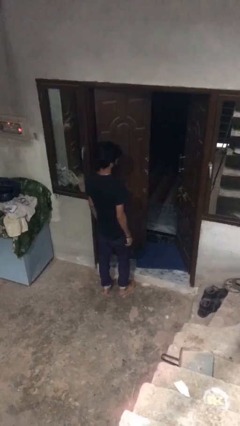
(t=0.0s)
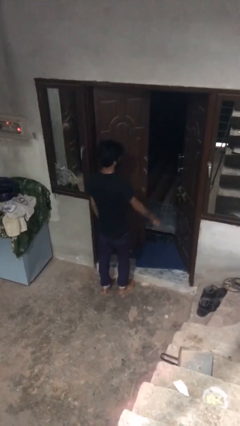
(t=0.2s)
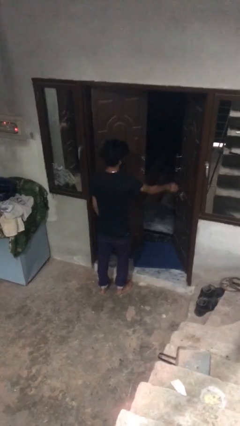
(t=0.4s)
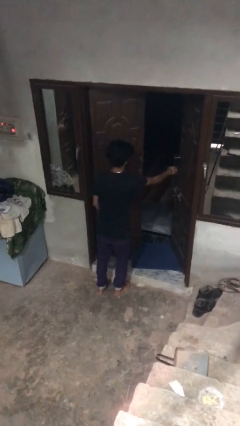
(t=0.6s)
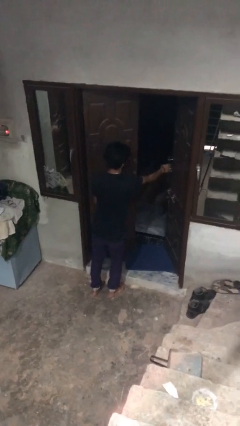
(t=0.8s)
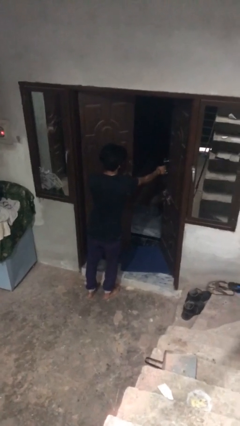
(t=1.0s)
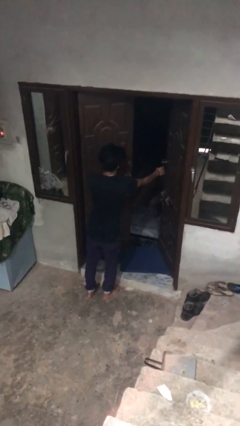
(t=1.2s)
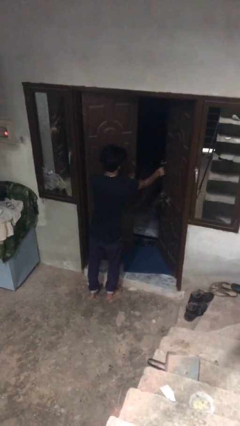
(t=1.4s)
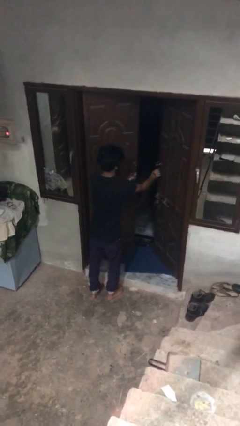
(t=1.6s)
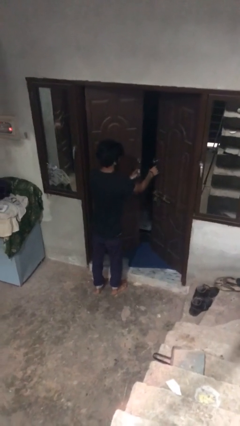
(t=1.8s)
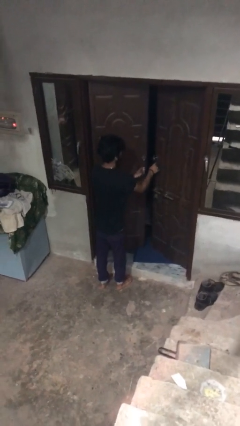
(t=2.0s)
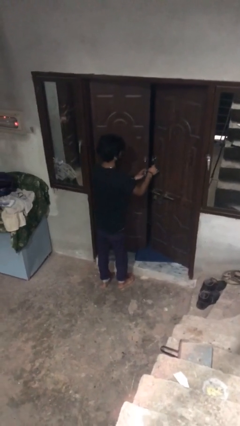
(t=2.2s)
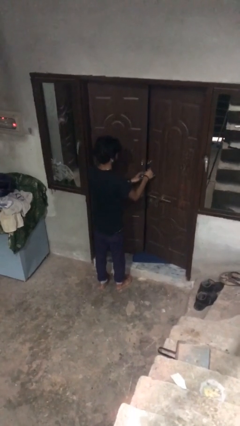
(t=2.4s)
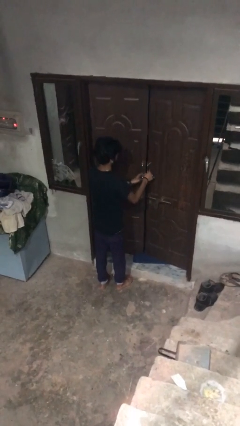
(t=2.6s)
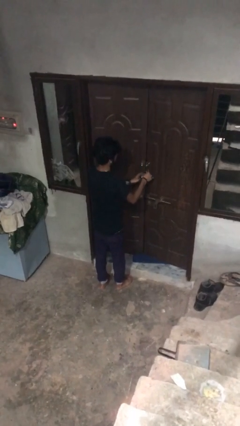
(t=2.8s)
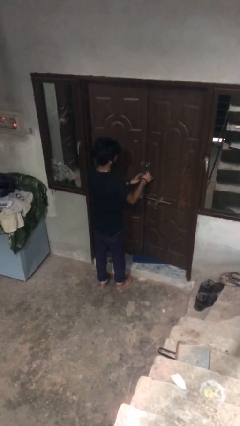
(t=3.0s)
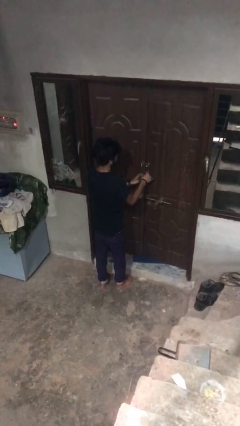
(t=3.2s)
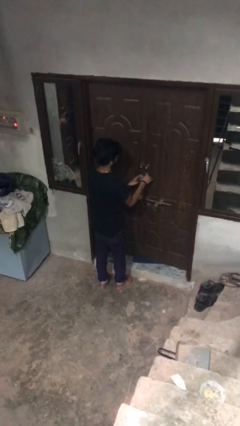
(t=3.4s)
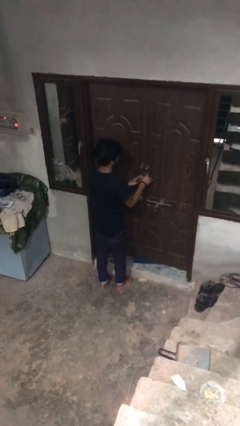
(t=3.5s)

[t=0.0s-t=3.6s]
person closes facility door

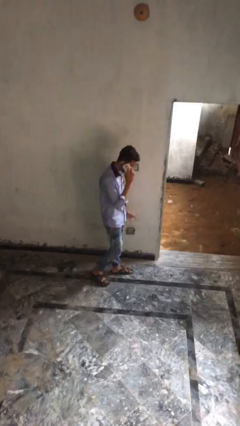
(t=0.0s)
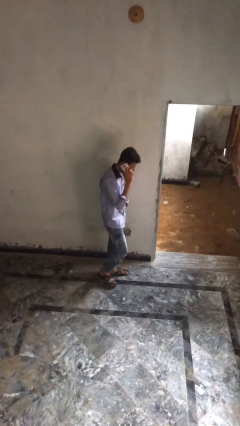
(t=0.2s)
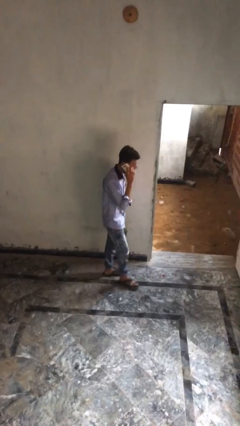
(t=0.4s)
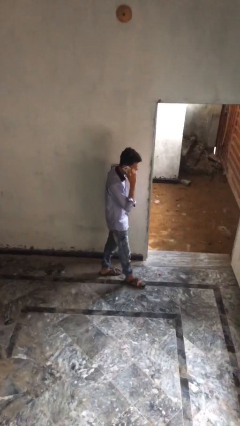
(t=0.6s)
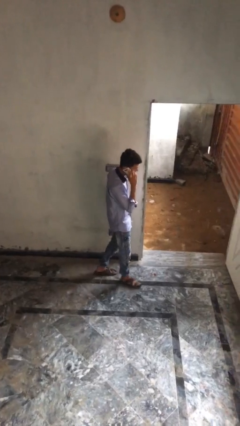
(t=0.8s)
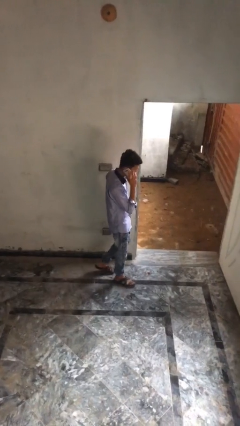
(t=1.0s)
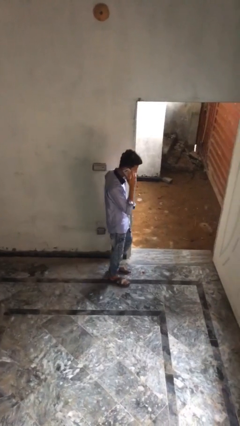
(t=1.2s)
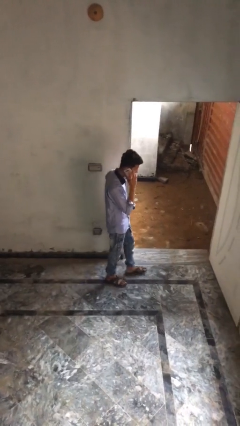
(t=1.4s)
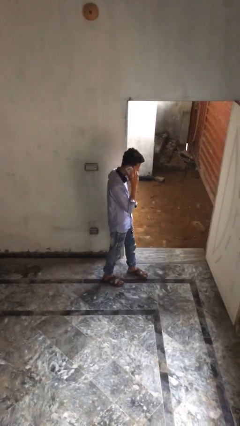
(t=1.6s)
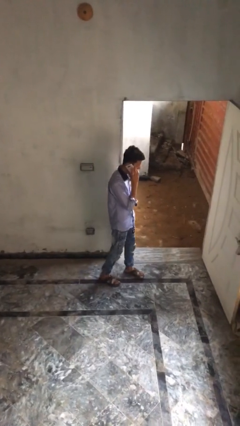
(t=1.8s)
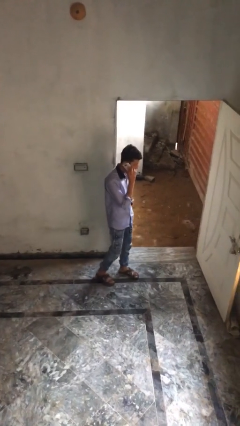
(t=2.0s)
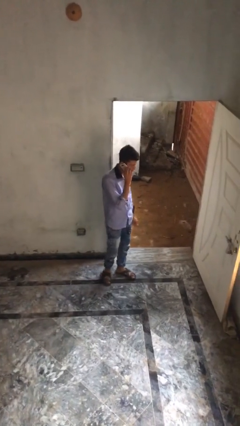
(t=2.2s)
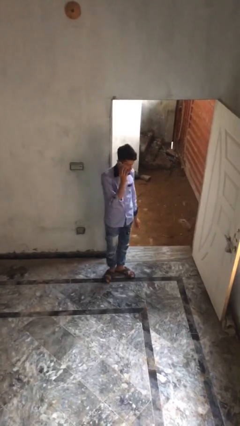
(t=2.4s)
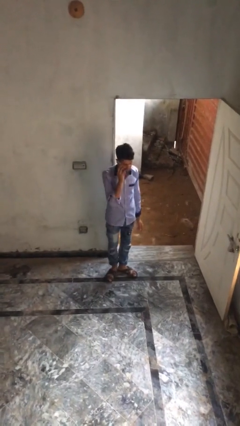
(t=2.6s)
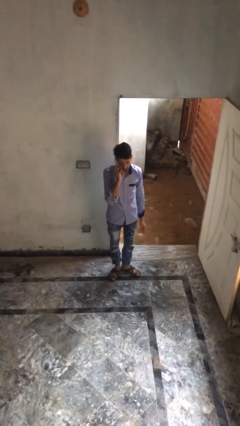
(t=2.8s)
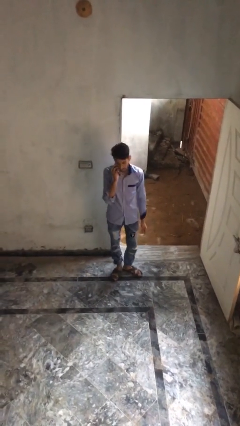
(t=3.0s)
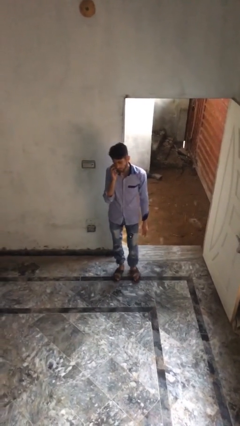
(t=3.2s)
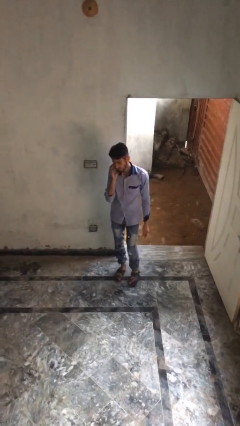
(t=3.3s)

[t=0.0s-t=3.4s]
person talks on phone

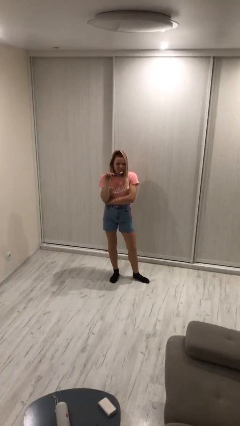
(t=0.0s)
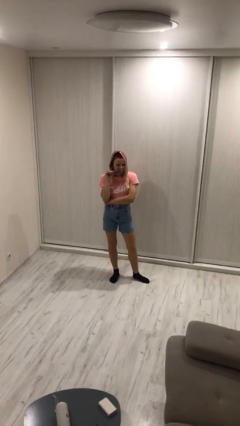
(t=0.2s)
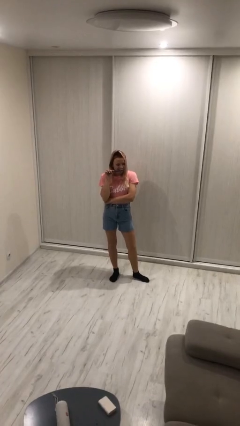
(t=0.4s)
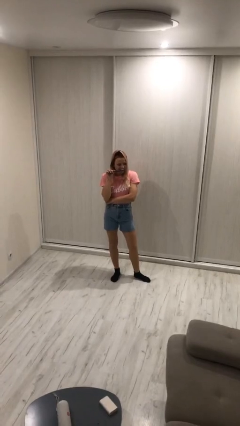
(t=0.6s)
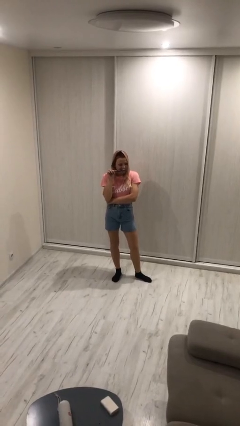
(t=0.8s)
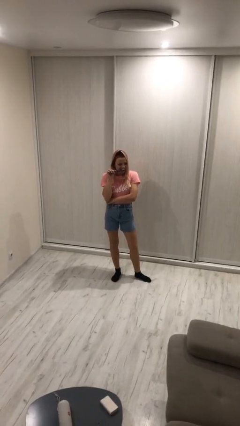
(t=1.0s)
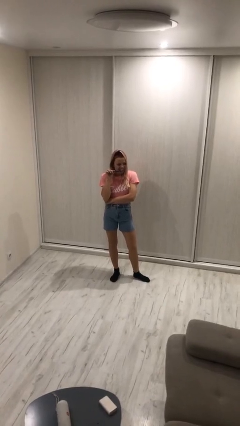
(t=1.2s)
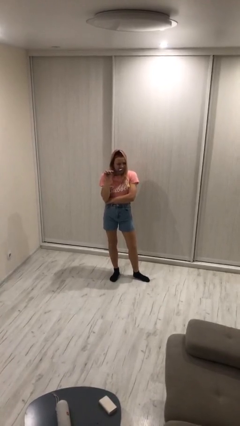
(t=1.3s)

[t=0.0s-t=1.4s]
person brushes teeth

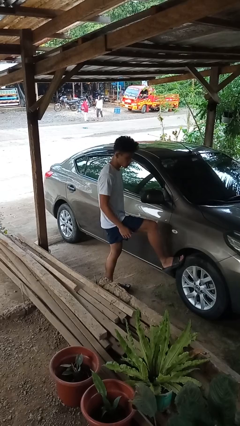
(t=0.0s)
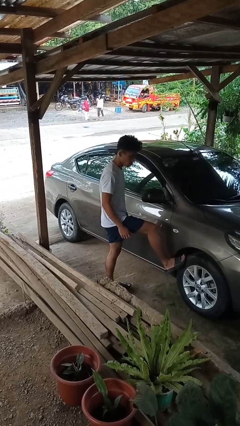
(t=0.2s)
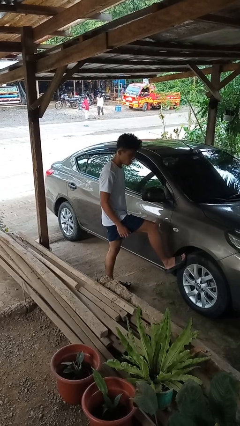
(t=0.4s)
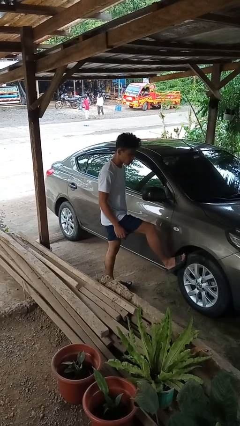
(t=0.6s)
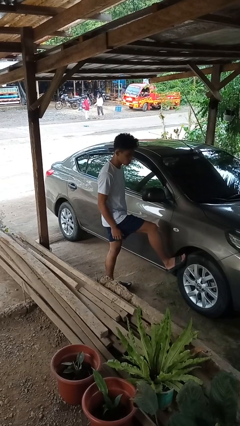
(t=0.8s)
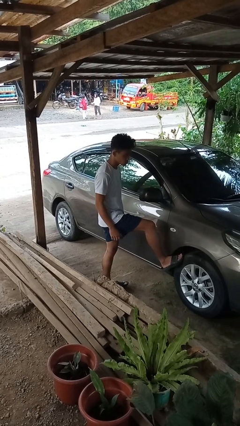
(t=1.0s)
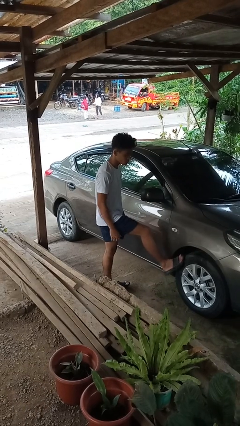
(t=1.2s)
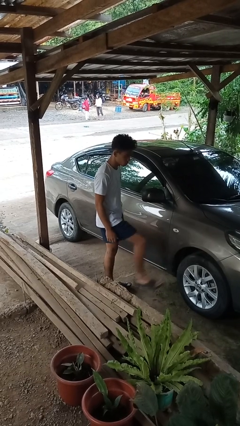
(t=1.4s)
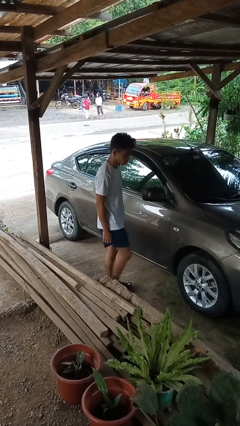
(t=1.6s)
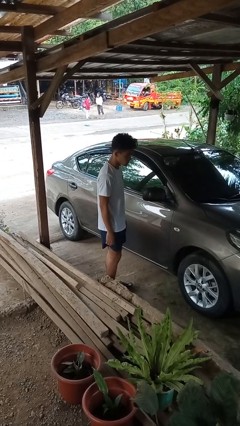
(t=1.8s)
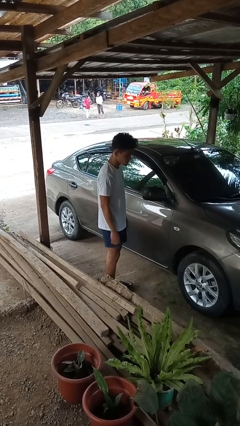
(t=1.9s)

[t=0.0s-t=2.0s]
person kicks car tires

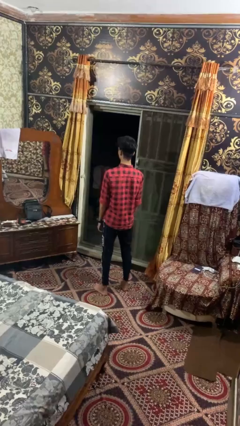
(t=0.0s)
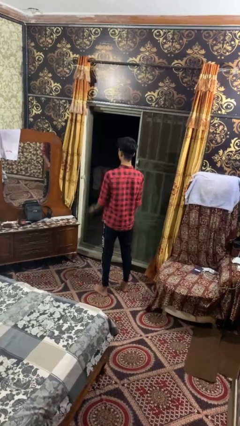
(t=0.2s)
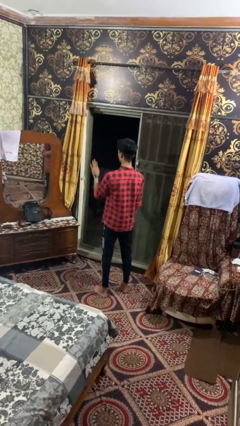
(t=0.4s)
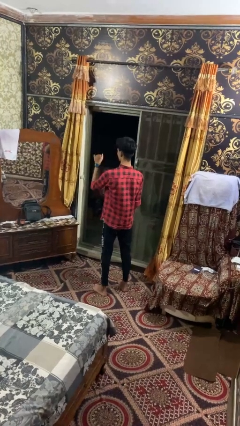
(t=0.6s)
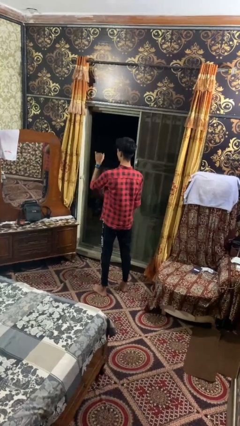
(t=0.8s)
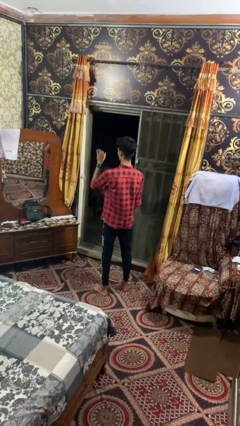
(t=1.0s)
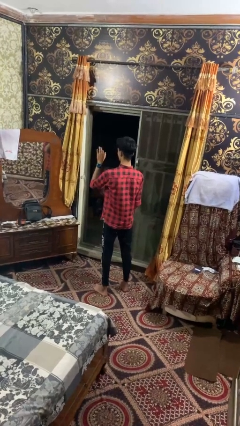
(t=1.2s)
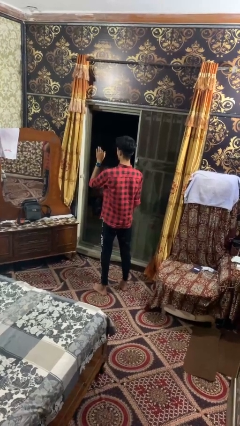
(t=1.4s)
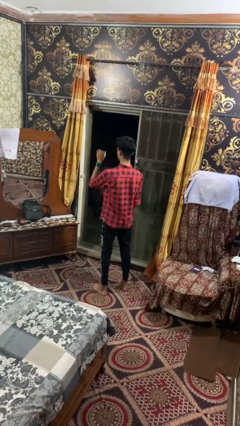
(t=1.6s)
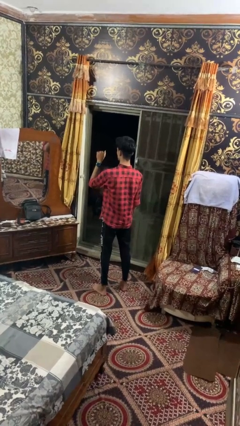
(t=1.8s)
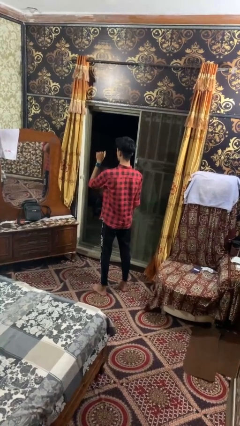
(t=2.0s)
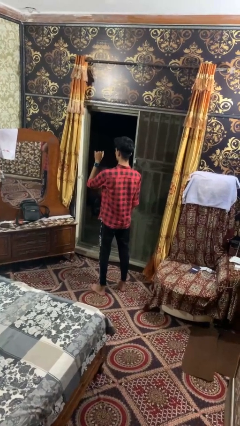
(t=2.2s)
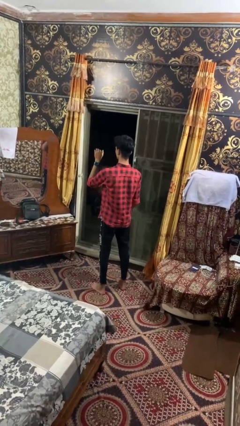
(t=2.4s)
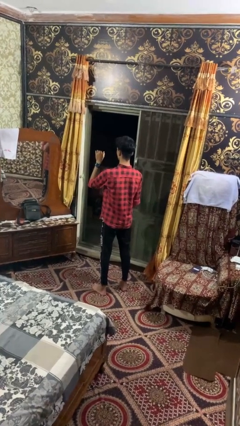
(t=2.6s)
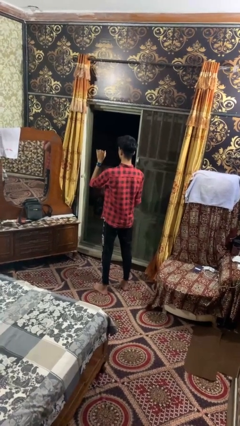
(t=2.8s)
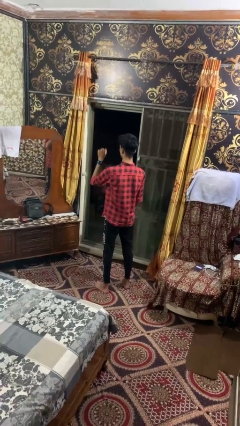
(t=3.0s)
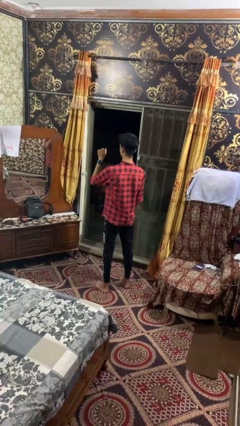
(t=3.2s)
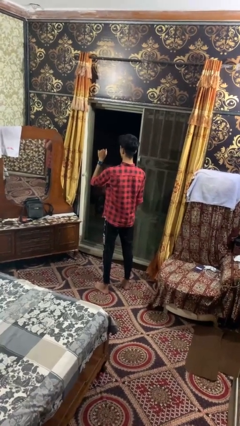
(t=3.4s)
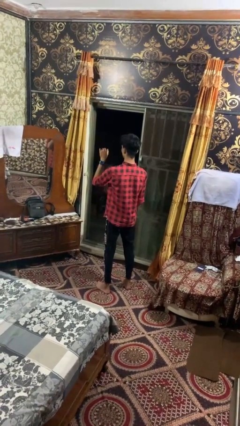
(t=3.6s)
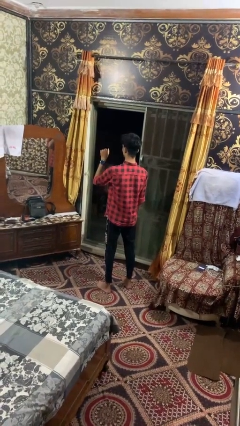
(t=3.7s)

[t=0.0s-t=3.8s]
person gestures come here

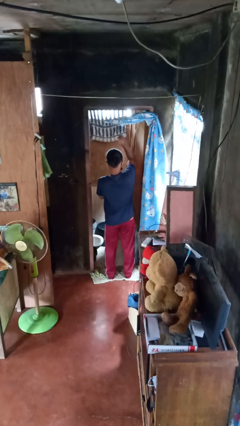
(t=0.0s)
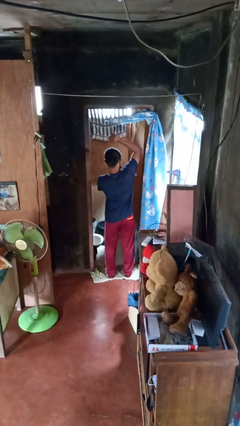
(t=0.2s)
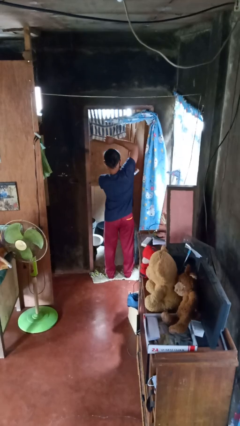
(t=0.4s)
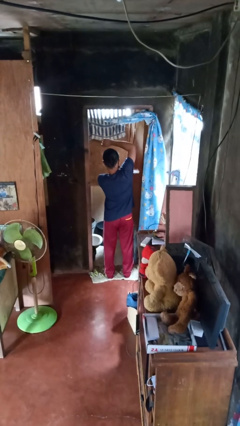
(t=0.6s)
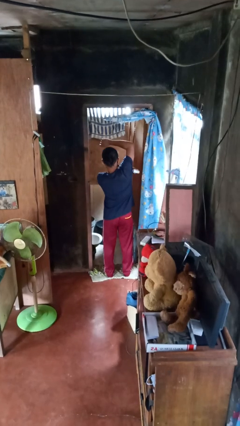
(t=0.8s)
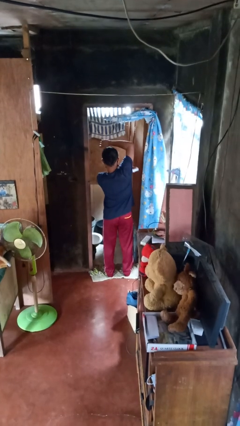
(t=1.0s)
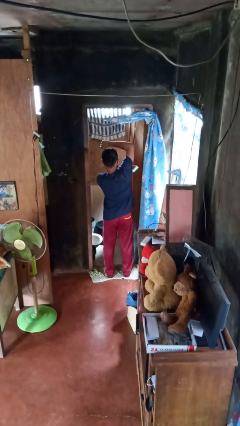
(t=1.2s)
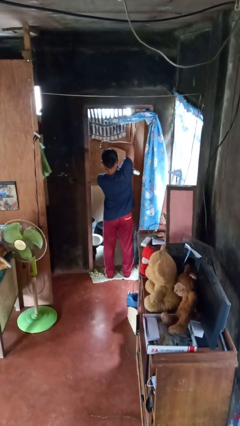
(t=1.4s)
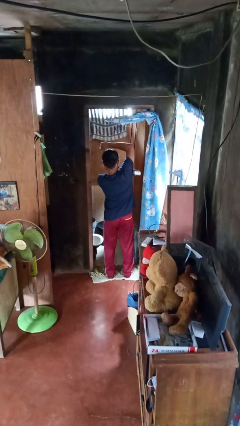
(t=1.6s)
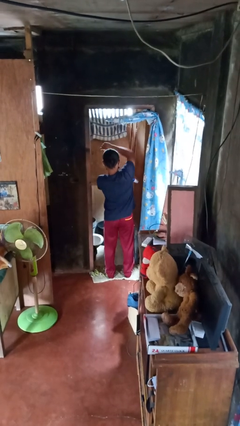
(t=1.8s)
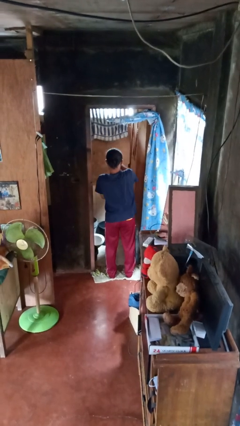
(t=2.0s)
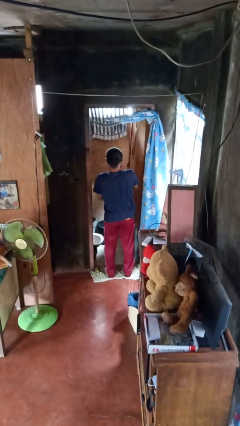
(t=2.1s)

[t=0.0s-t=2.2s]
person applies deodorant

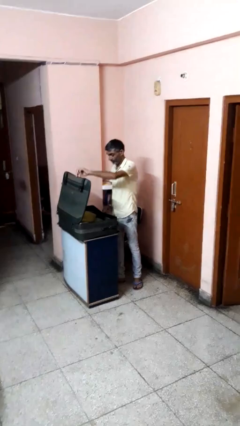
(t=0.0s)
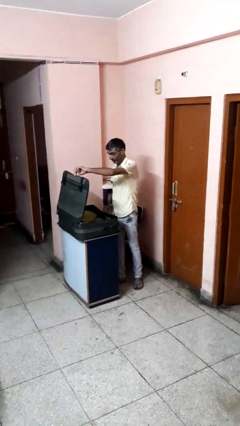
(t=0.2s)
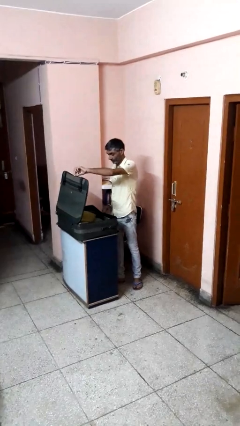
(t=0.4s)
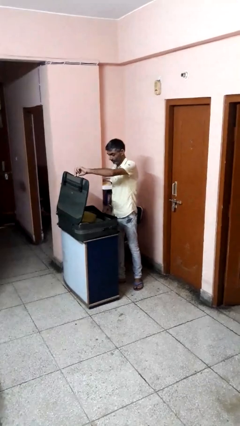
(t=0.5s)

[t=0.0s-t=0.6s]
person opens suitcase

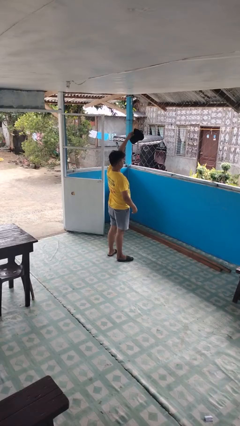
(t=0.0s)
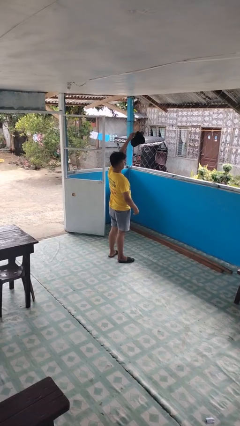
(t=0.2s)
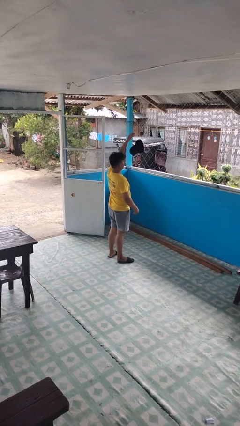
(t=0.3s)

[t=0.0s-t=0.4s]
person drops object
